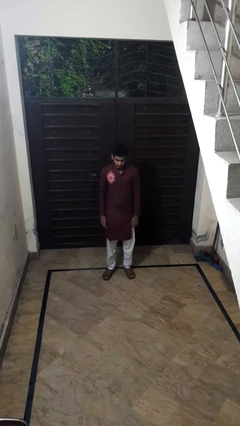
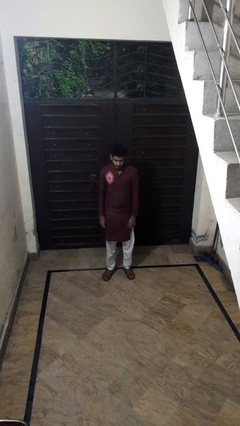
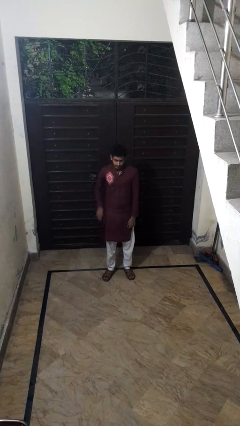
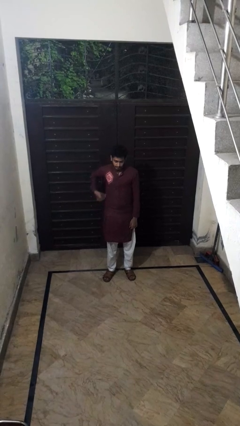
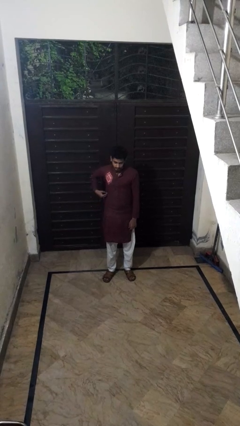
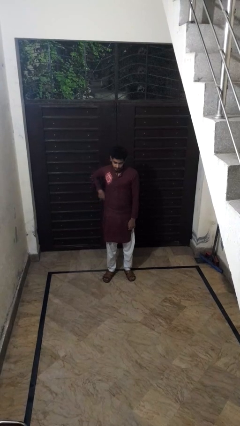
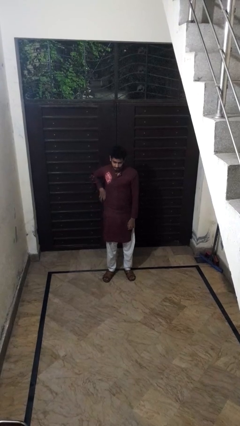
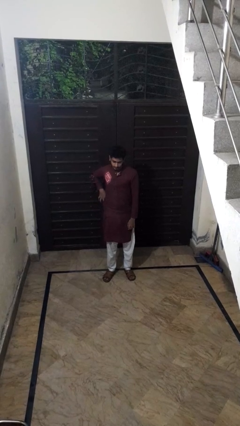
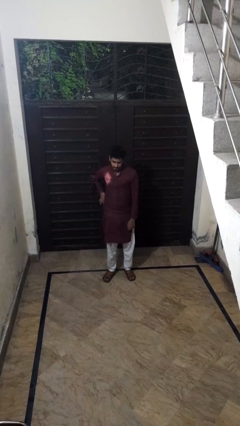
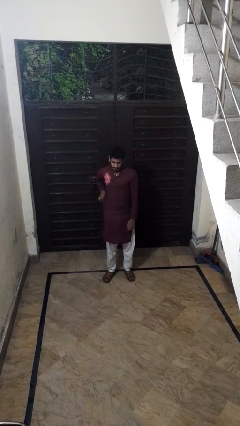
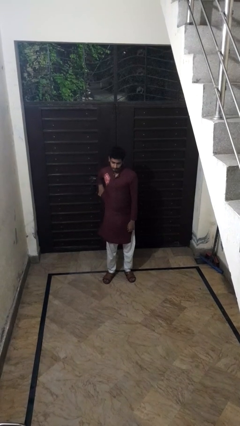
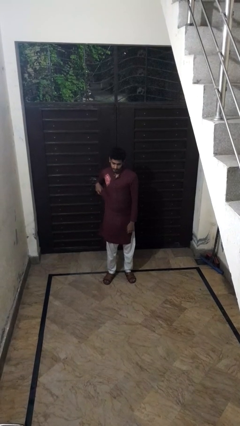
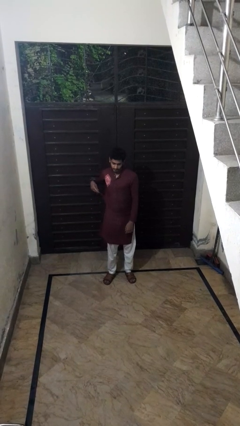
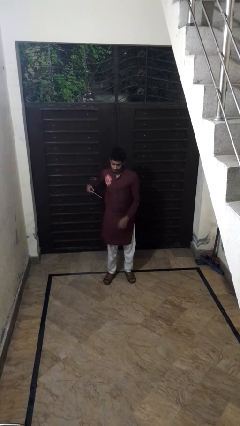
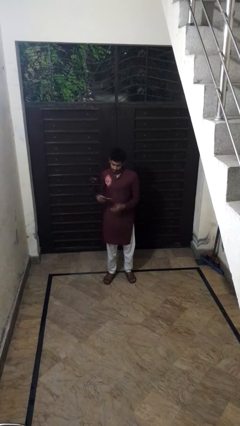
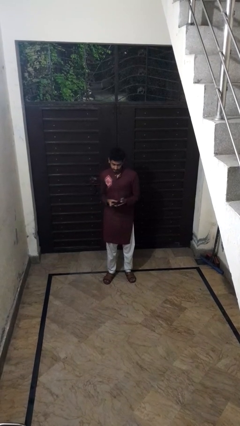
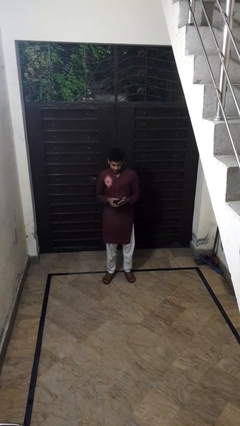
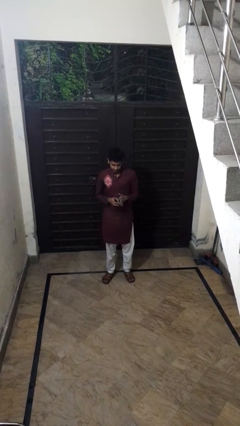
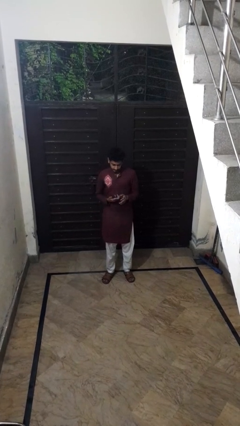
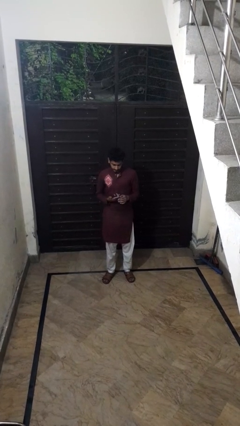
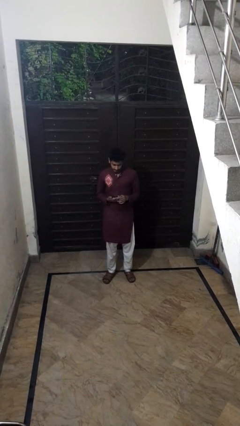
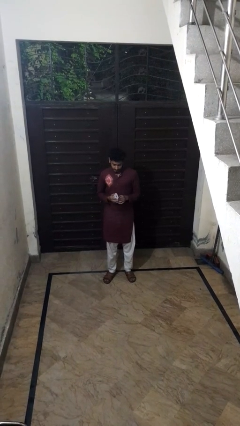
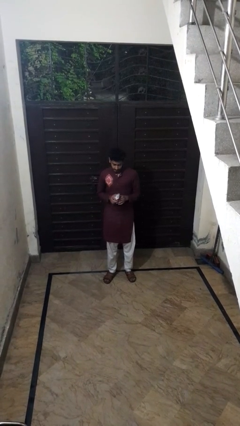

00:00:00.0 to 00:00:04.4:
person takes phone from pocket

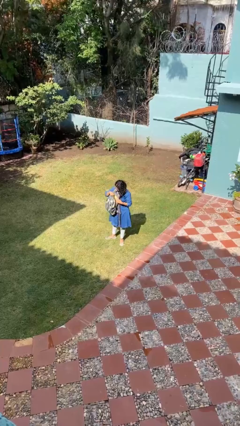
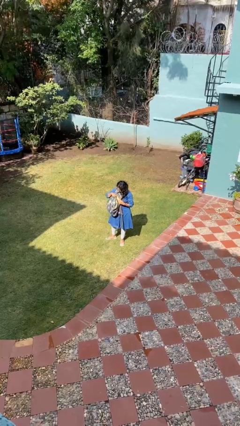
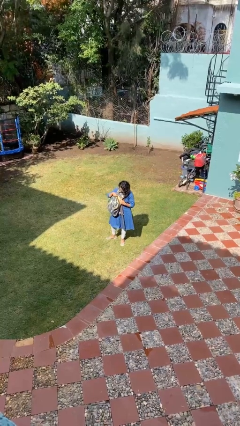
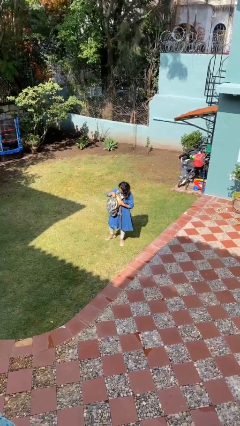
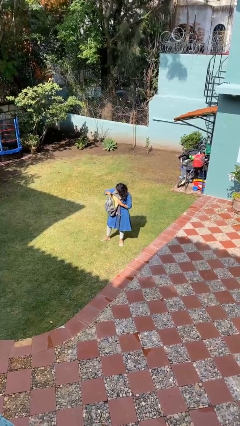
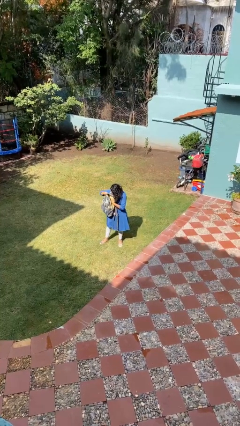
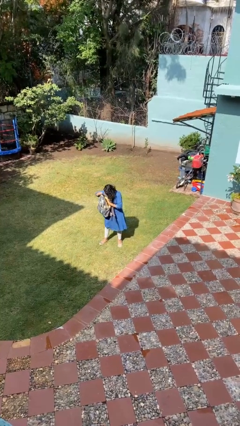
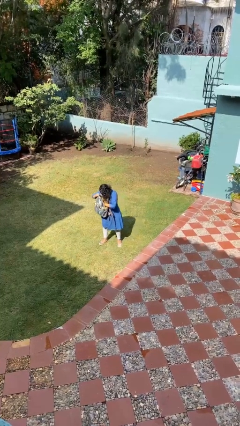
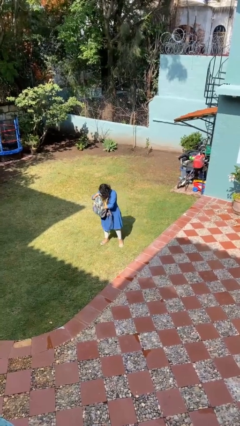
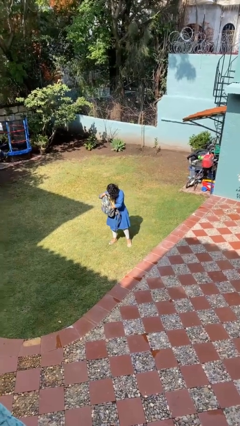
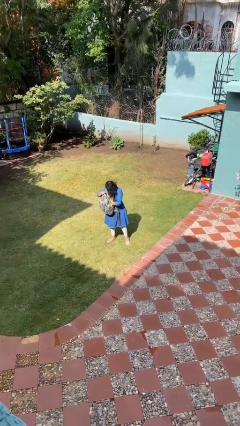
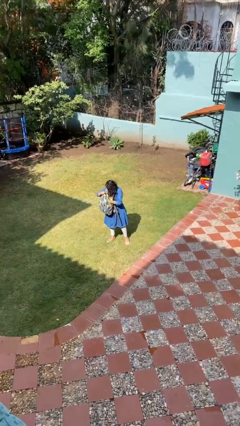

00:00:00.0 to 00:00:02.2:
person searches in backpack

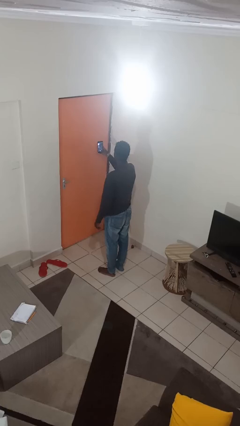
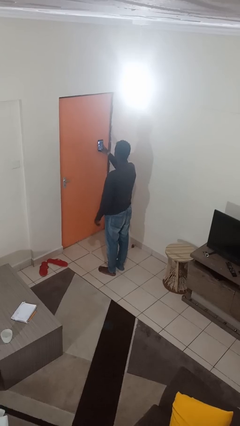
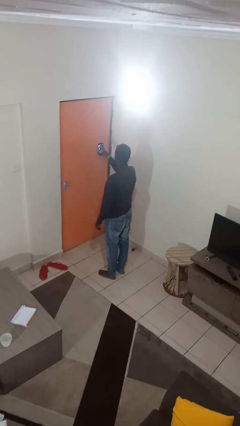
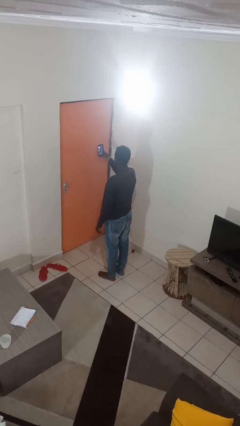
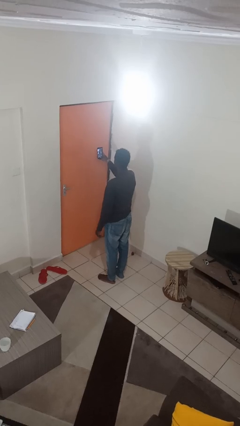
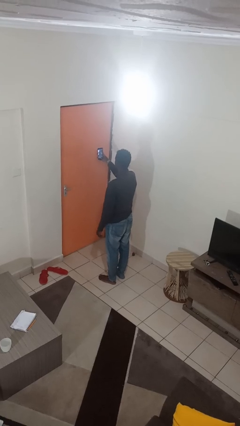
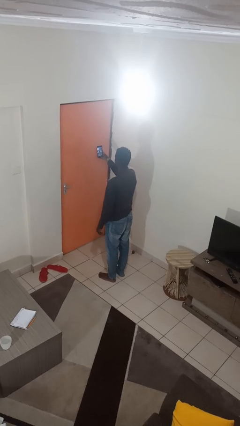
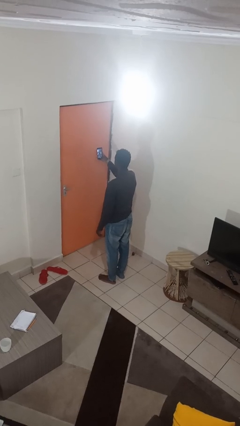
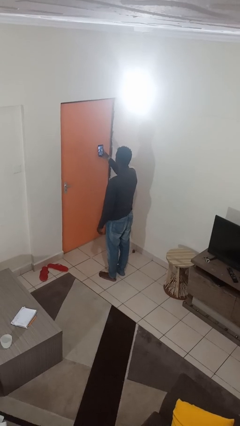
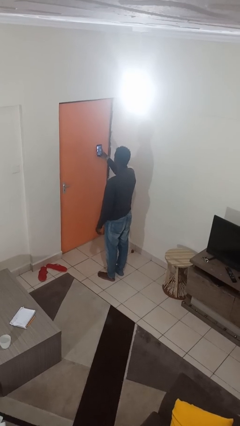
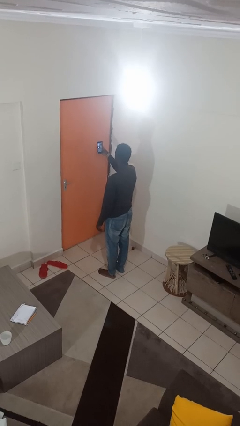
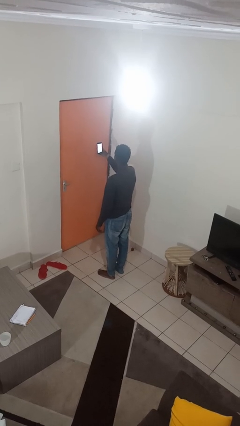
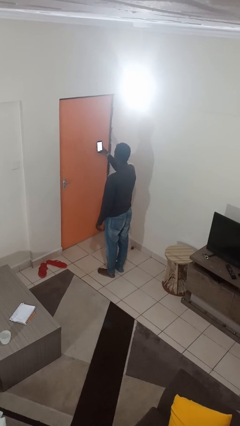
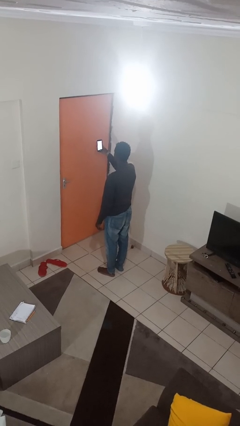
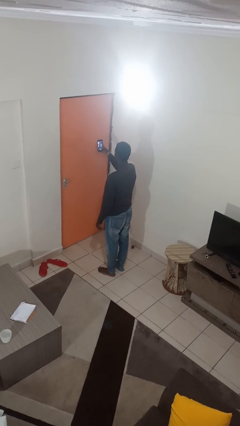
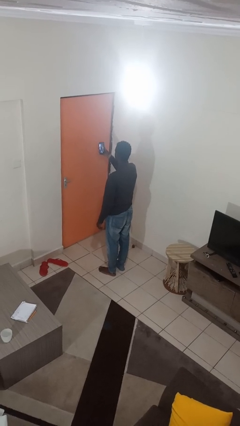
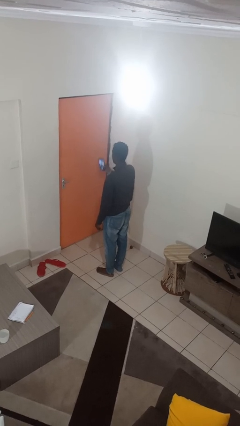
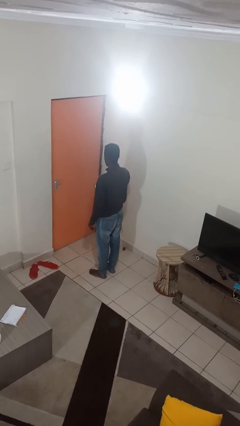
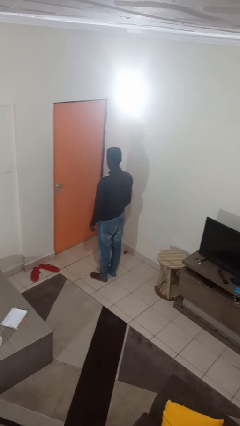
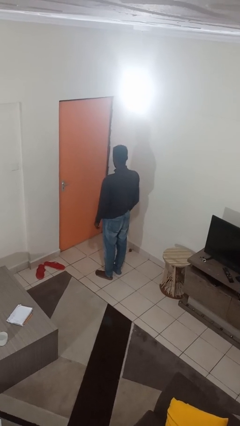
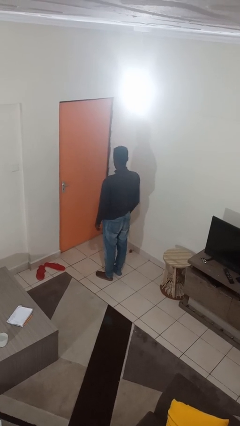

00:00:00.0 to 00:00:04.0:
person takes selfie

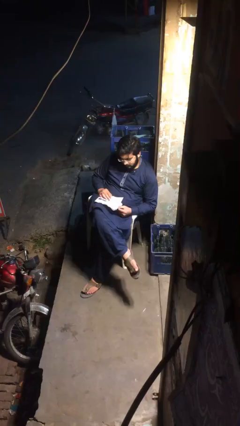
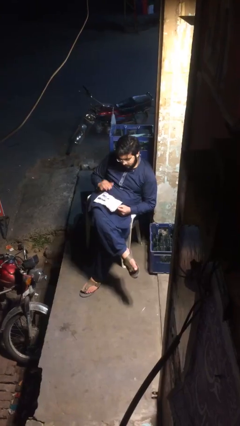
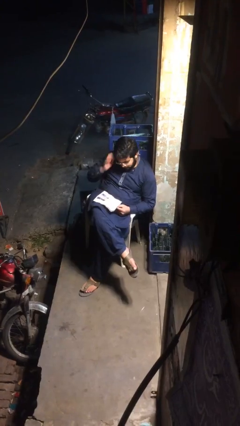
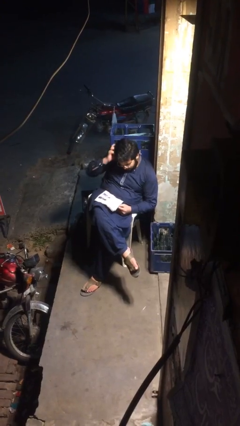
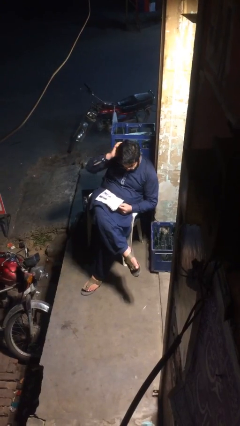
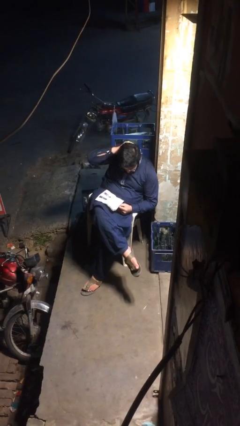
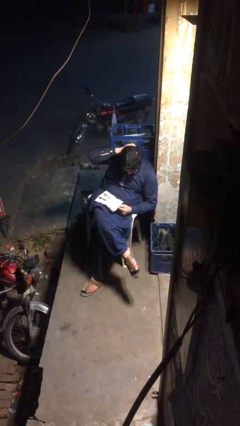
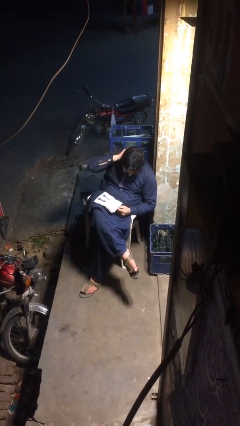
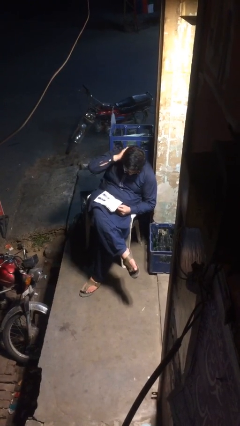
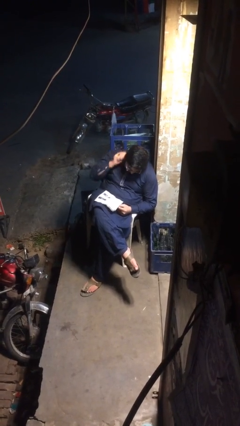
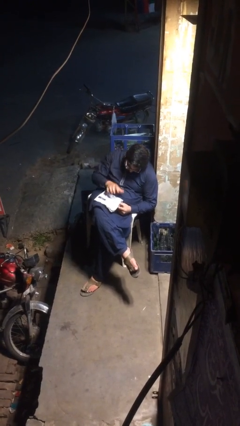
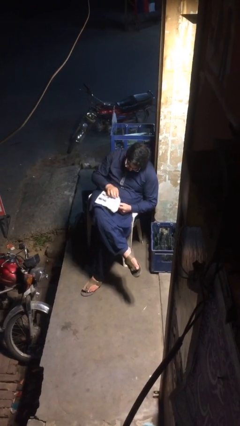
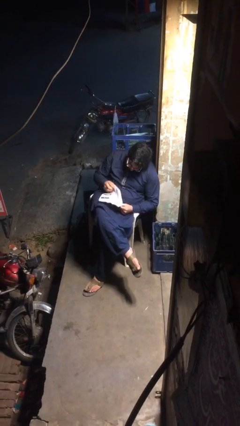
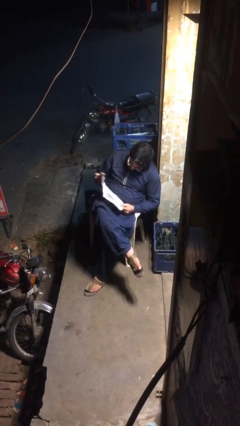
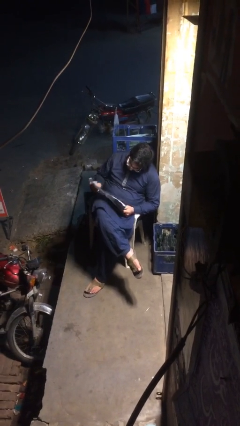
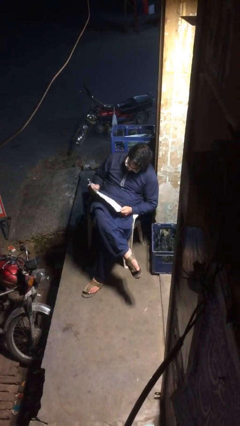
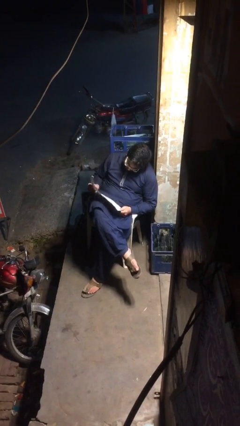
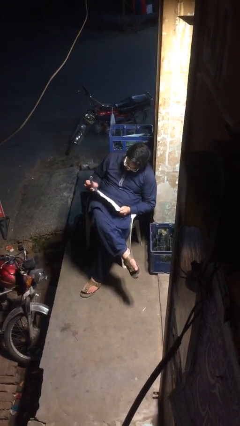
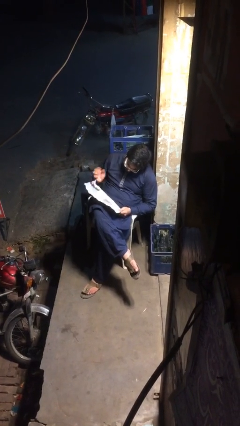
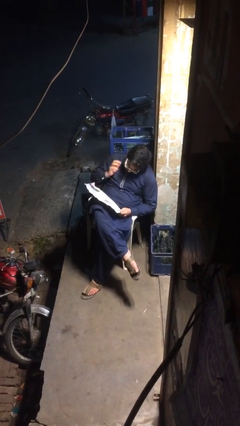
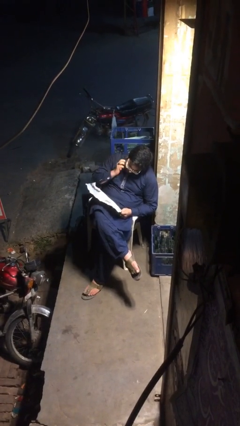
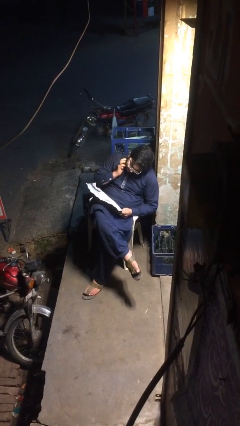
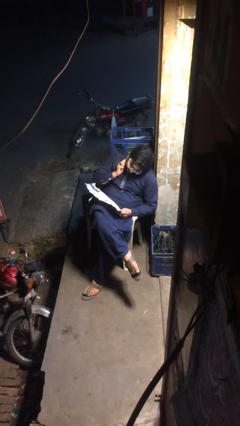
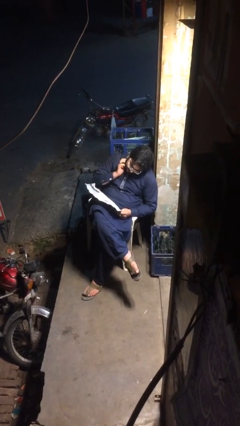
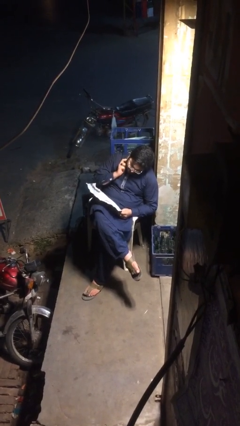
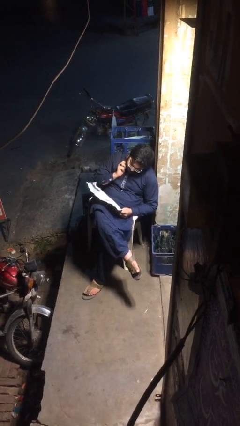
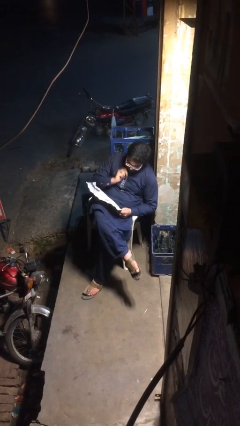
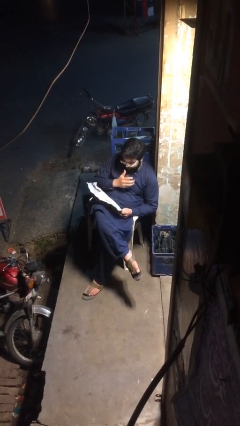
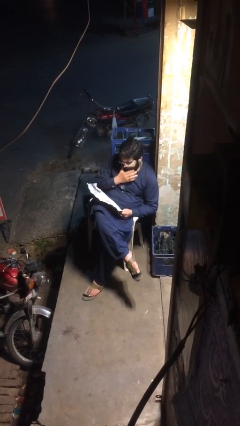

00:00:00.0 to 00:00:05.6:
person reads document

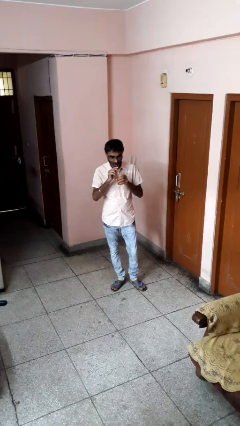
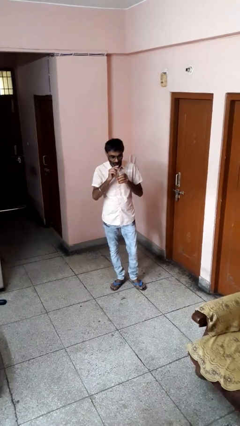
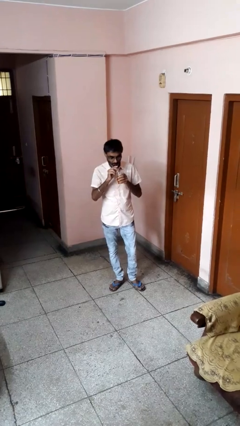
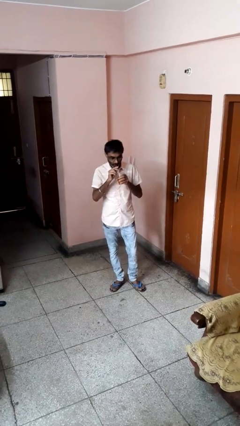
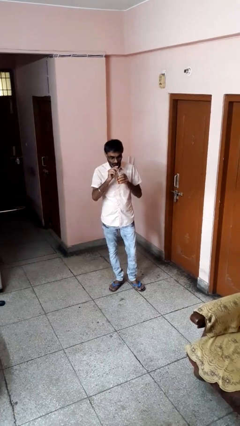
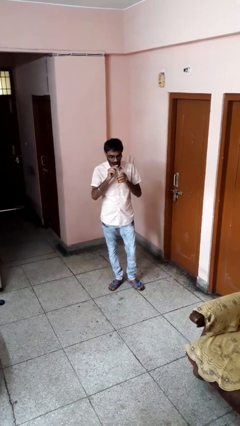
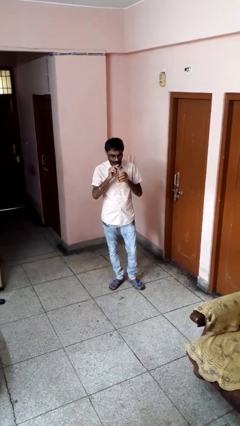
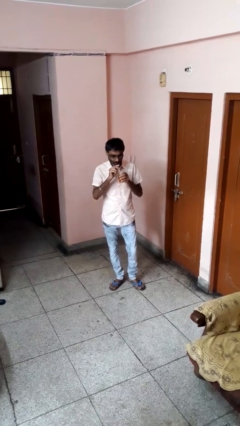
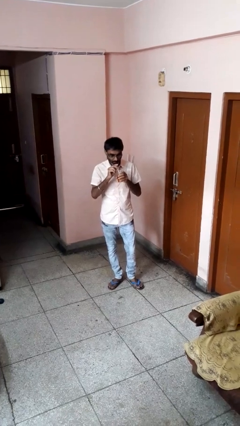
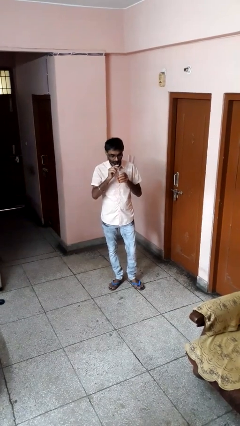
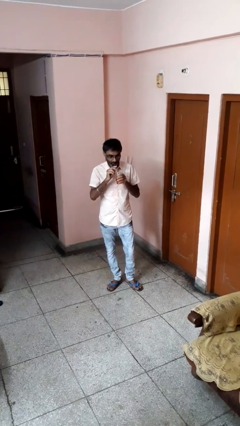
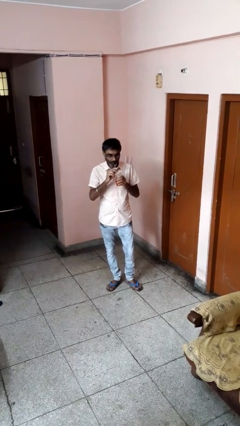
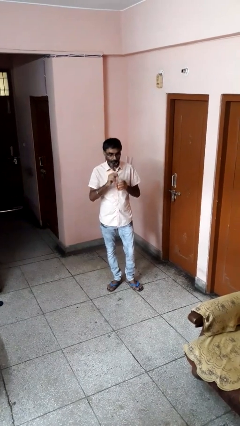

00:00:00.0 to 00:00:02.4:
person drinks from straw
